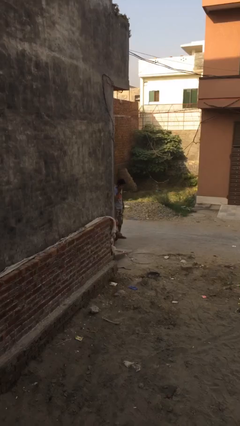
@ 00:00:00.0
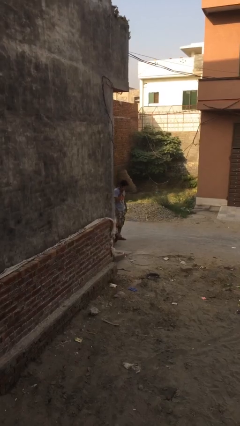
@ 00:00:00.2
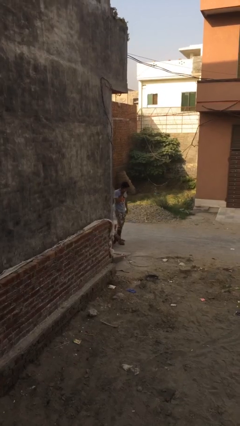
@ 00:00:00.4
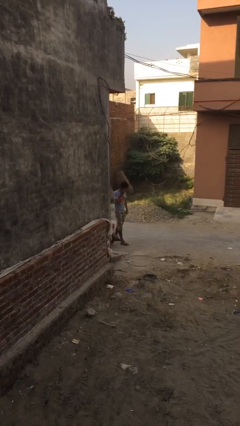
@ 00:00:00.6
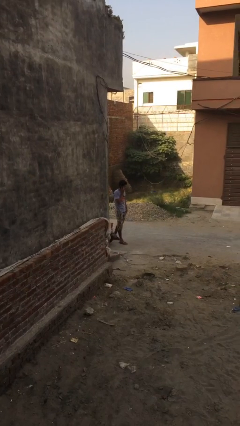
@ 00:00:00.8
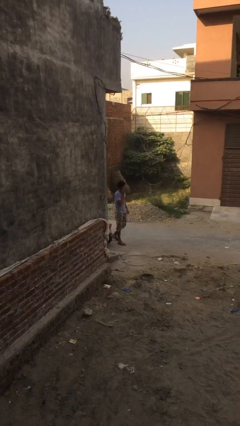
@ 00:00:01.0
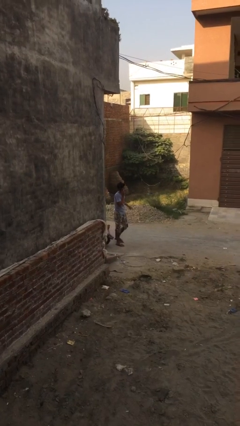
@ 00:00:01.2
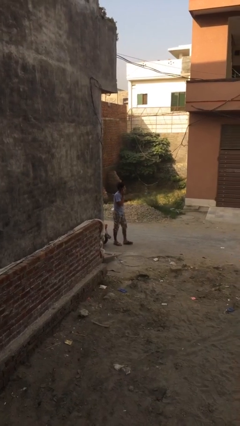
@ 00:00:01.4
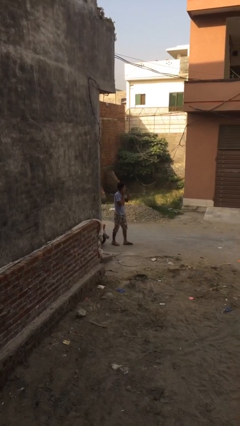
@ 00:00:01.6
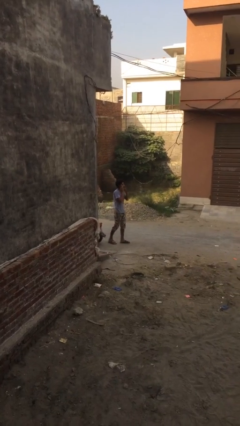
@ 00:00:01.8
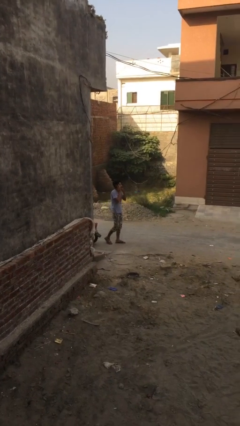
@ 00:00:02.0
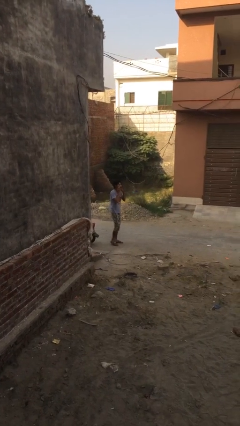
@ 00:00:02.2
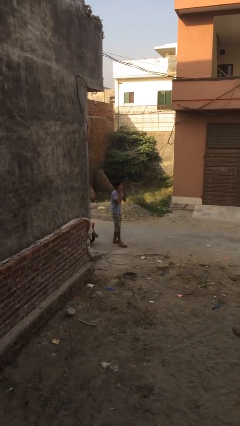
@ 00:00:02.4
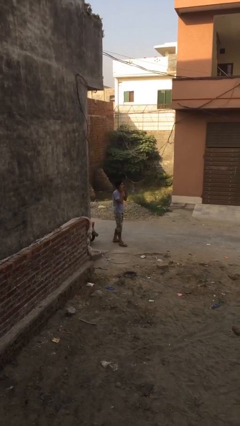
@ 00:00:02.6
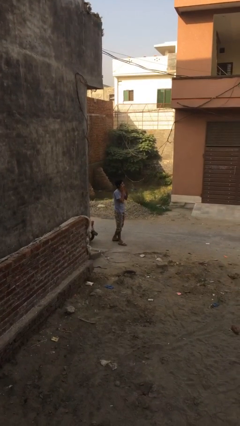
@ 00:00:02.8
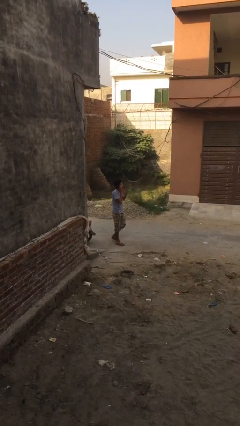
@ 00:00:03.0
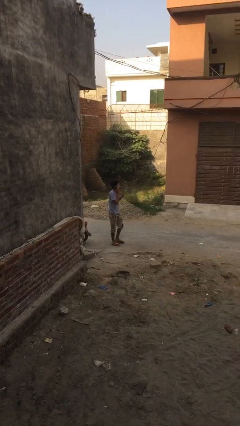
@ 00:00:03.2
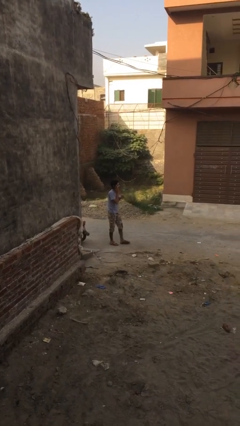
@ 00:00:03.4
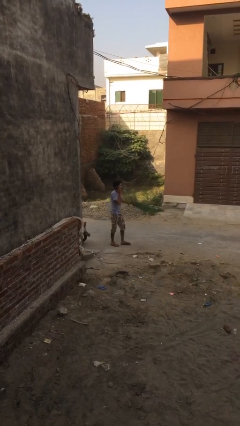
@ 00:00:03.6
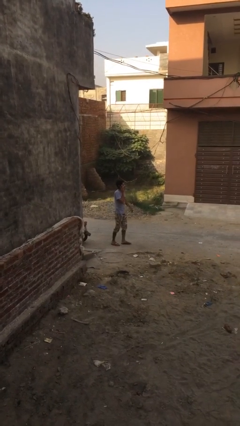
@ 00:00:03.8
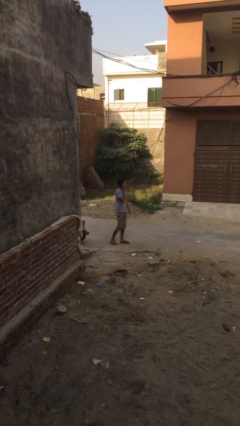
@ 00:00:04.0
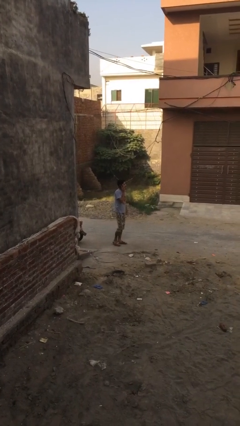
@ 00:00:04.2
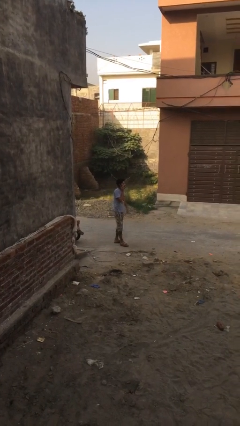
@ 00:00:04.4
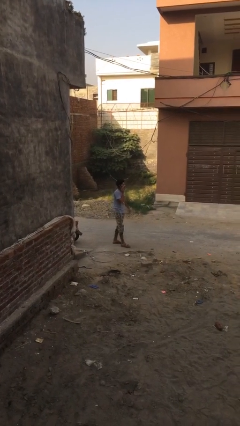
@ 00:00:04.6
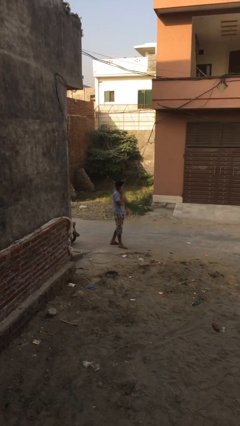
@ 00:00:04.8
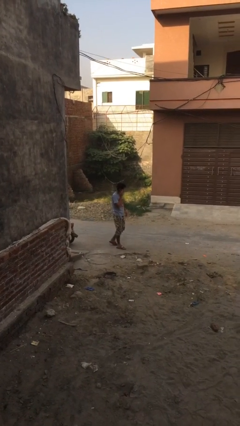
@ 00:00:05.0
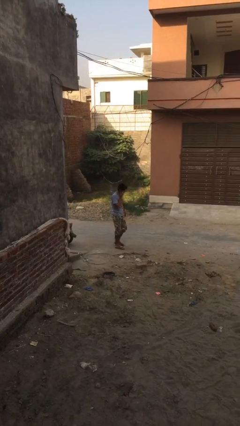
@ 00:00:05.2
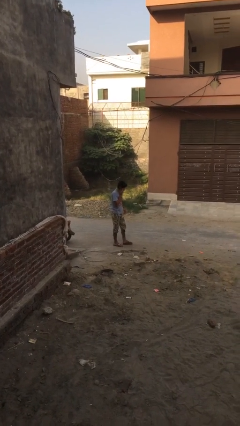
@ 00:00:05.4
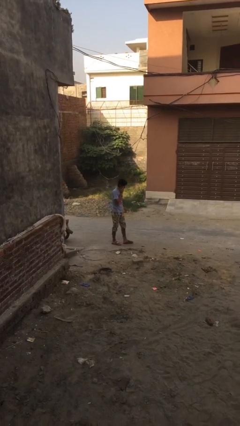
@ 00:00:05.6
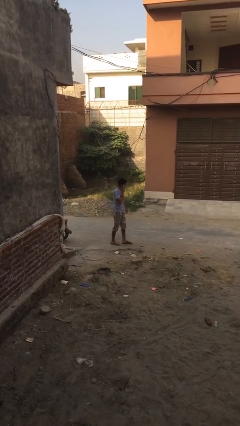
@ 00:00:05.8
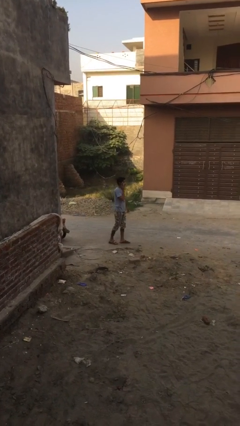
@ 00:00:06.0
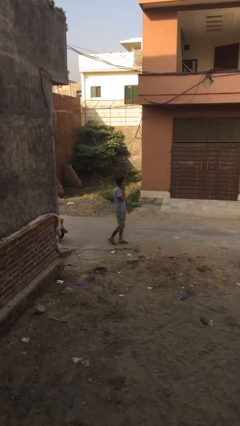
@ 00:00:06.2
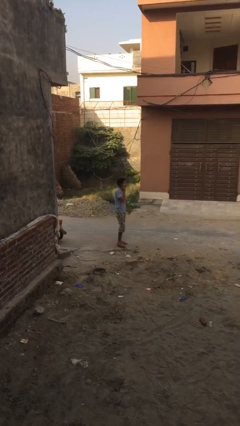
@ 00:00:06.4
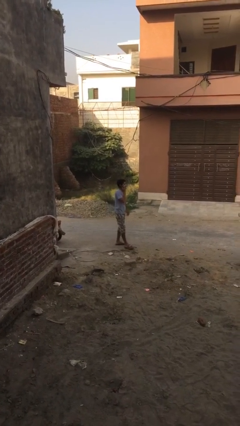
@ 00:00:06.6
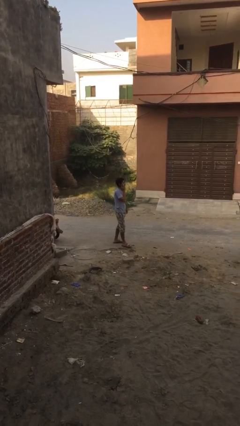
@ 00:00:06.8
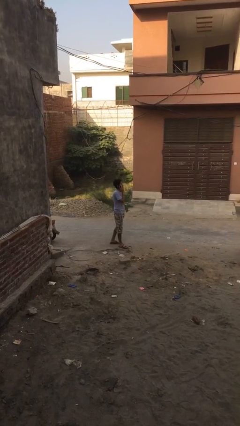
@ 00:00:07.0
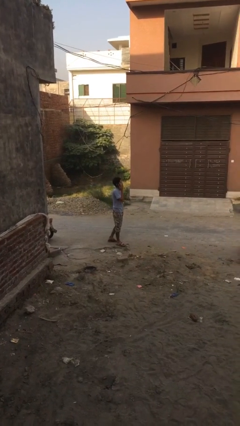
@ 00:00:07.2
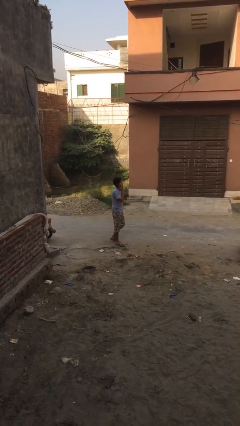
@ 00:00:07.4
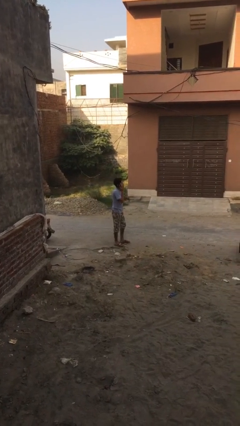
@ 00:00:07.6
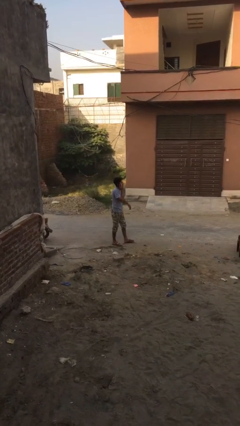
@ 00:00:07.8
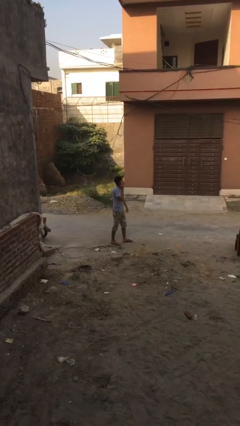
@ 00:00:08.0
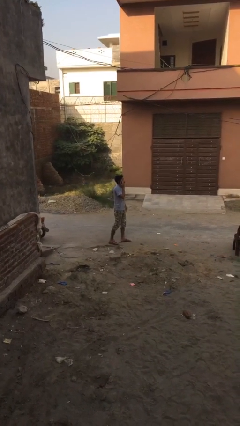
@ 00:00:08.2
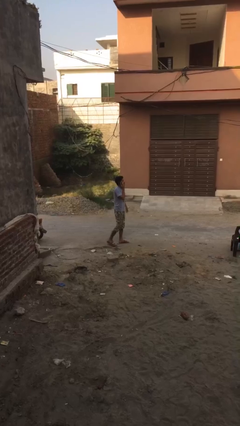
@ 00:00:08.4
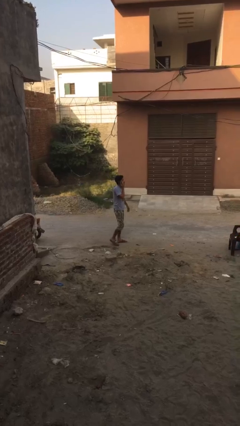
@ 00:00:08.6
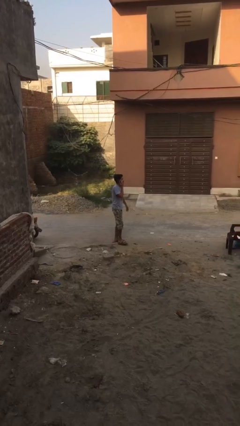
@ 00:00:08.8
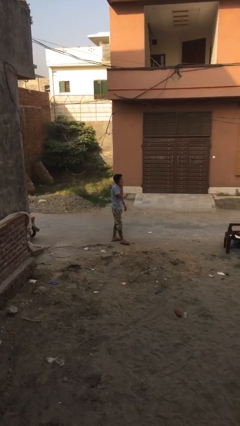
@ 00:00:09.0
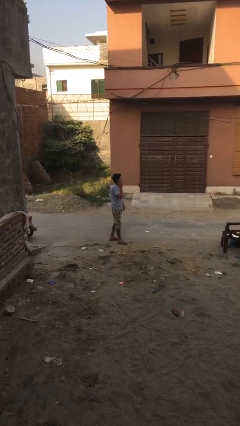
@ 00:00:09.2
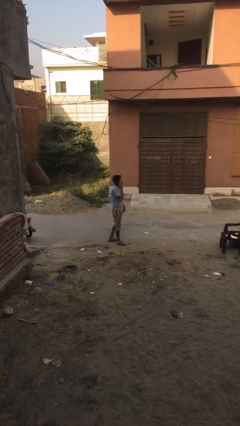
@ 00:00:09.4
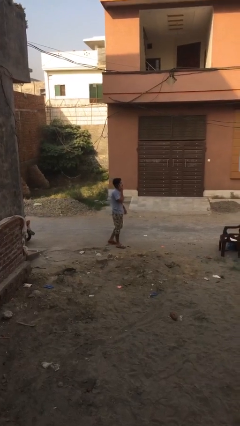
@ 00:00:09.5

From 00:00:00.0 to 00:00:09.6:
person enters scene through structure

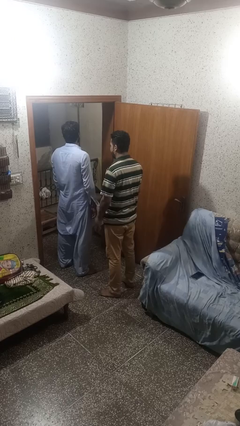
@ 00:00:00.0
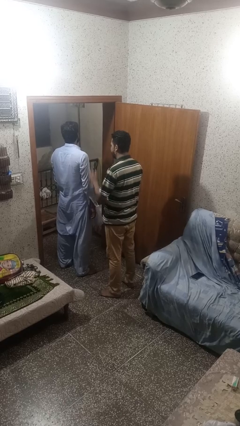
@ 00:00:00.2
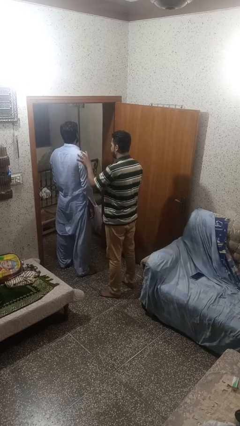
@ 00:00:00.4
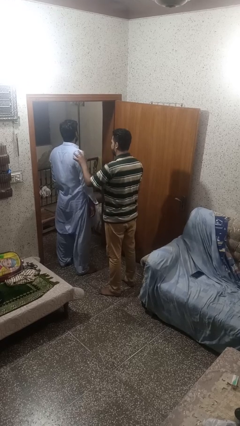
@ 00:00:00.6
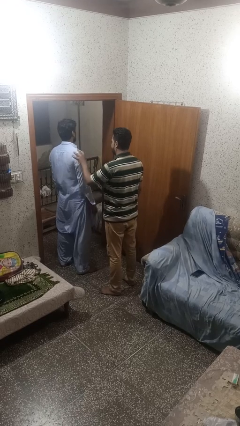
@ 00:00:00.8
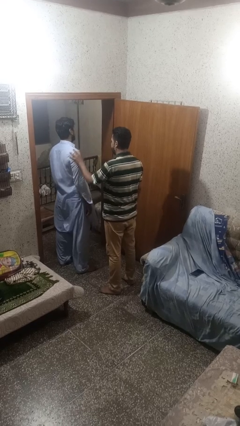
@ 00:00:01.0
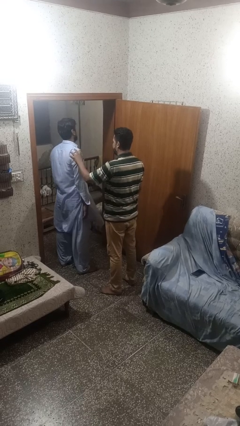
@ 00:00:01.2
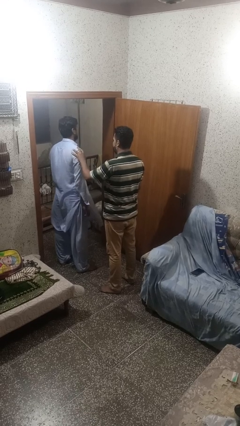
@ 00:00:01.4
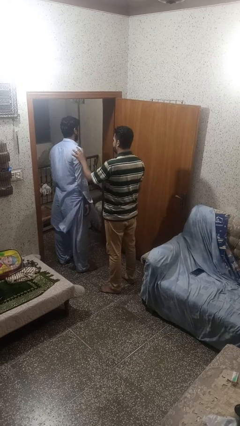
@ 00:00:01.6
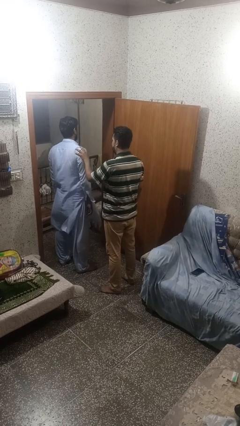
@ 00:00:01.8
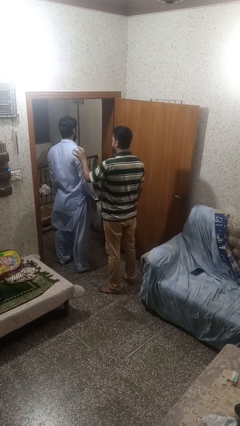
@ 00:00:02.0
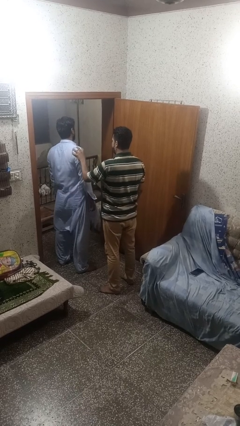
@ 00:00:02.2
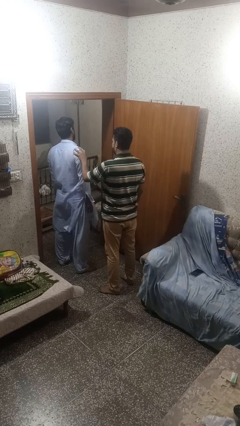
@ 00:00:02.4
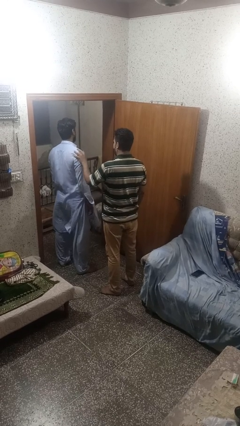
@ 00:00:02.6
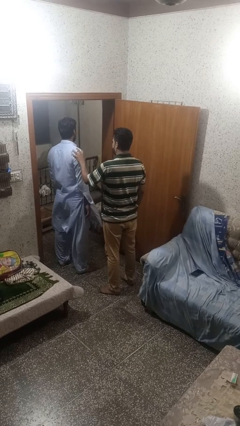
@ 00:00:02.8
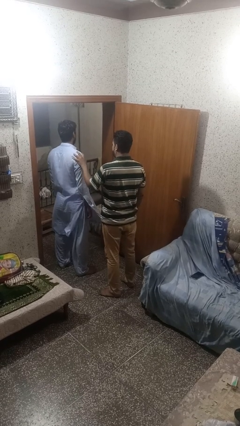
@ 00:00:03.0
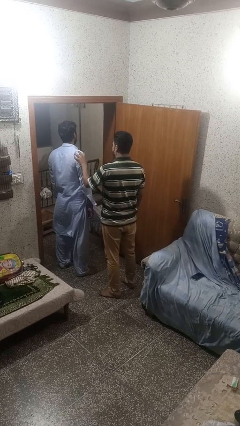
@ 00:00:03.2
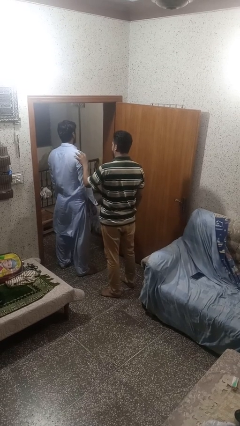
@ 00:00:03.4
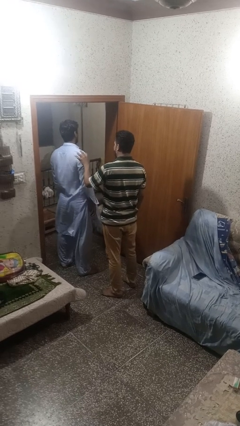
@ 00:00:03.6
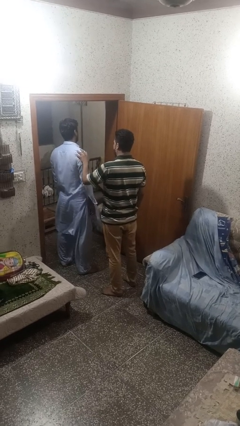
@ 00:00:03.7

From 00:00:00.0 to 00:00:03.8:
person grabs person by shoulder

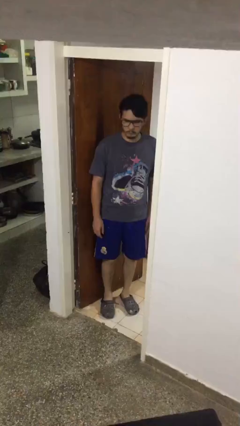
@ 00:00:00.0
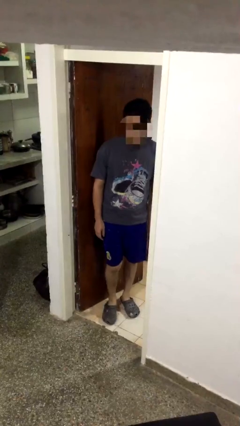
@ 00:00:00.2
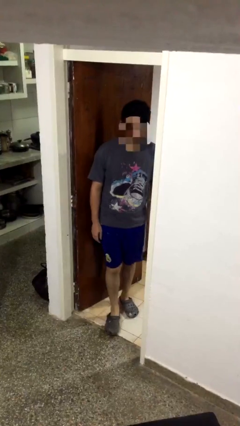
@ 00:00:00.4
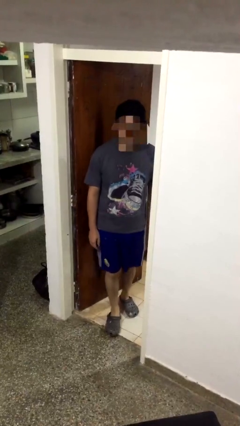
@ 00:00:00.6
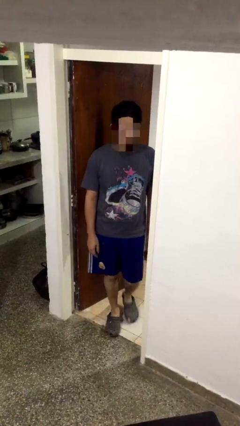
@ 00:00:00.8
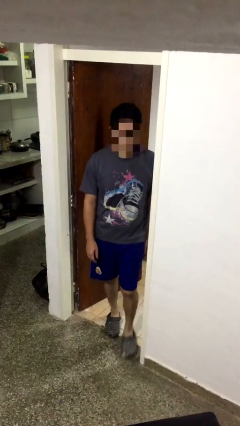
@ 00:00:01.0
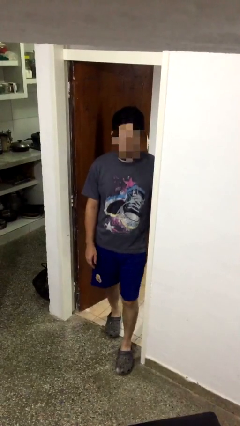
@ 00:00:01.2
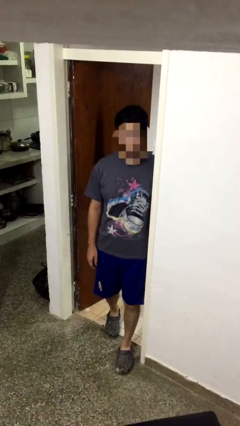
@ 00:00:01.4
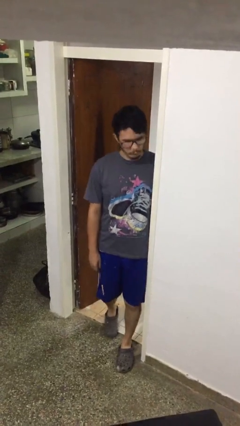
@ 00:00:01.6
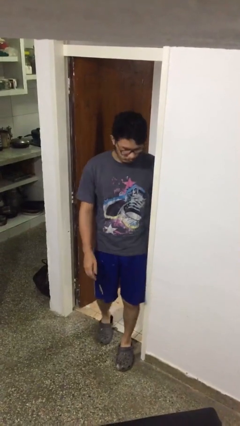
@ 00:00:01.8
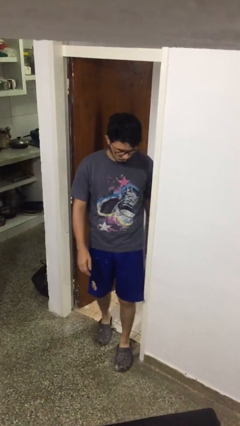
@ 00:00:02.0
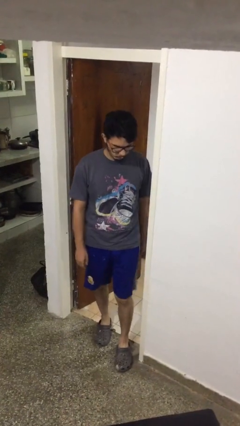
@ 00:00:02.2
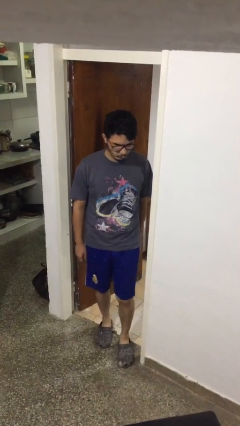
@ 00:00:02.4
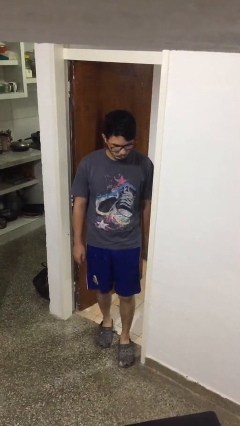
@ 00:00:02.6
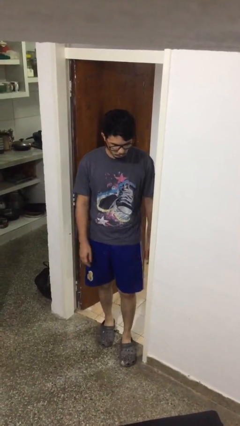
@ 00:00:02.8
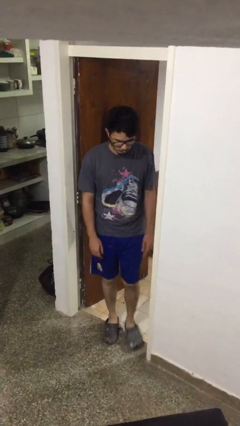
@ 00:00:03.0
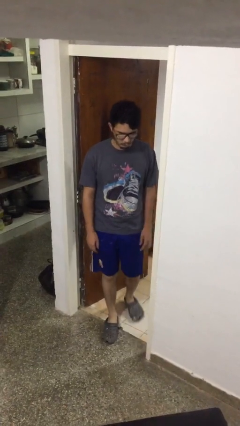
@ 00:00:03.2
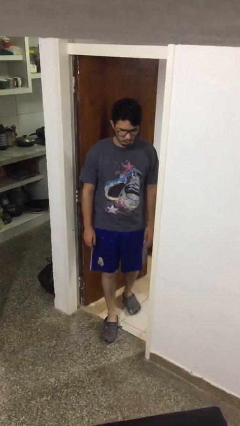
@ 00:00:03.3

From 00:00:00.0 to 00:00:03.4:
person bumps into wall

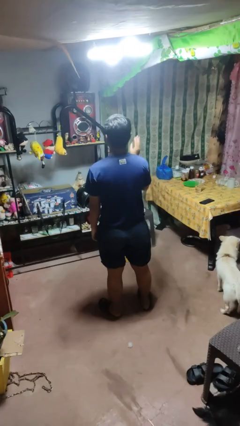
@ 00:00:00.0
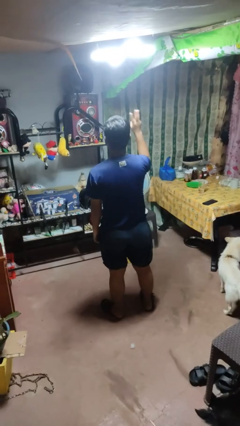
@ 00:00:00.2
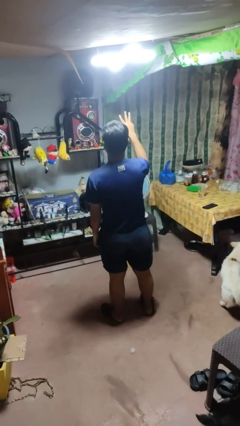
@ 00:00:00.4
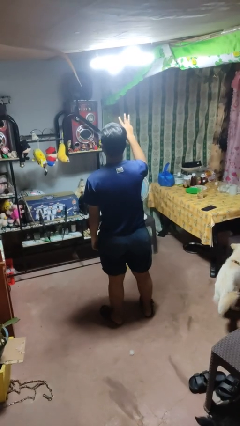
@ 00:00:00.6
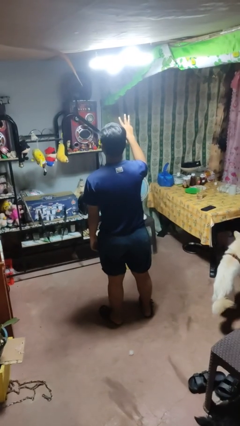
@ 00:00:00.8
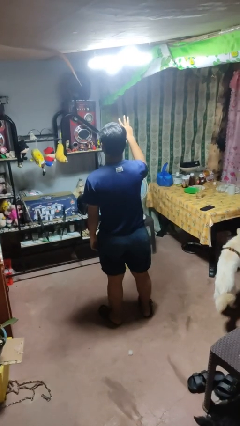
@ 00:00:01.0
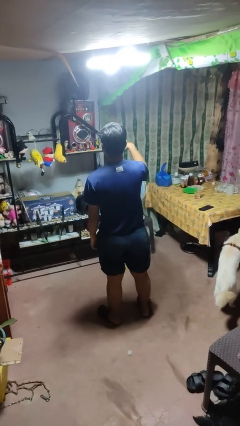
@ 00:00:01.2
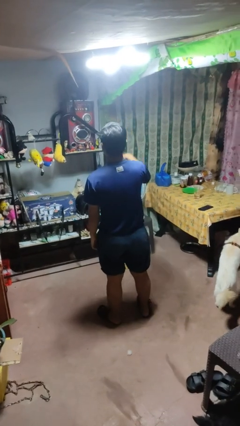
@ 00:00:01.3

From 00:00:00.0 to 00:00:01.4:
person gestures number three
